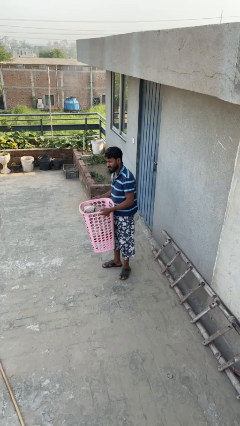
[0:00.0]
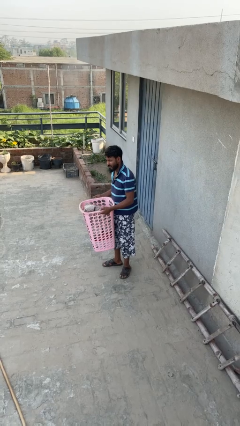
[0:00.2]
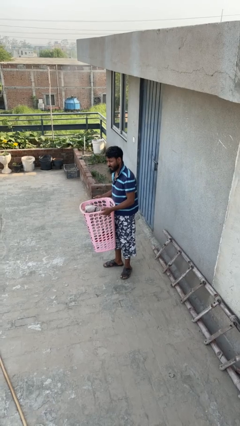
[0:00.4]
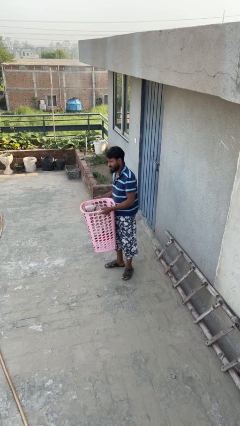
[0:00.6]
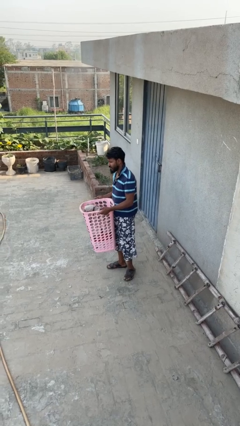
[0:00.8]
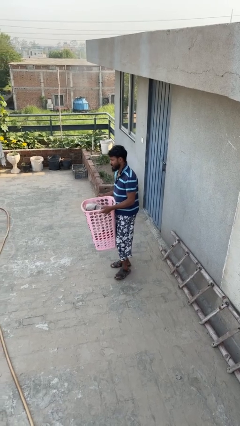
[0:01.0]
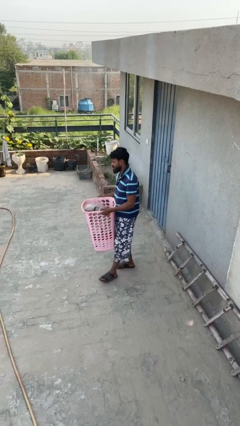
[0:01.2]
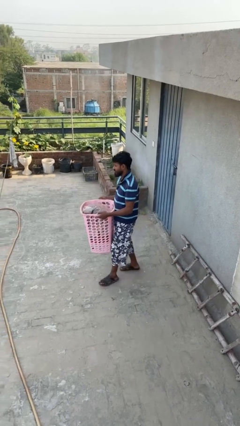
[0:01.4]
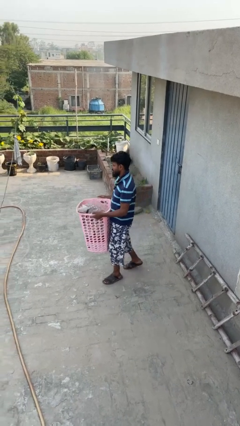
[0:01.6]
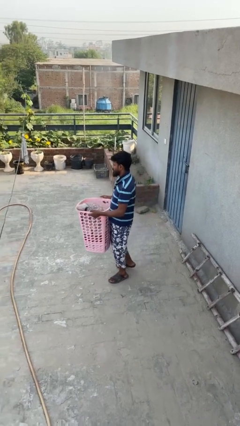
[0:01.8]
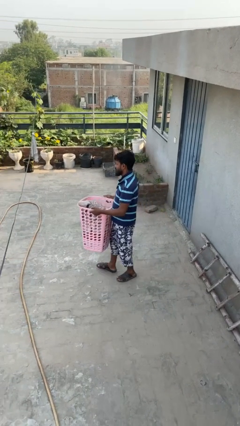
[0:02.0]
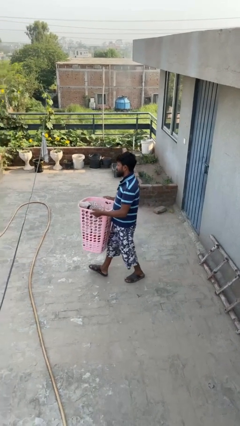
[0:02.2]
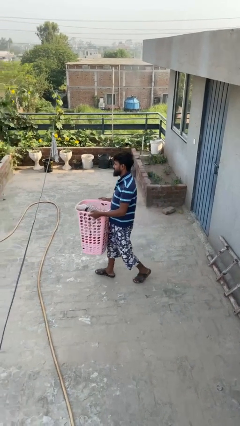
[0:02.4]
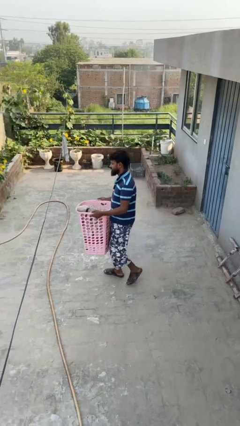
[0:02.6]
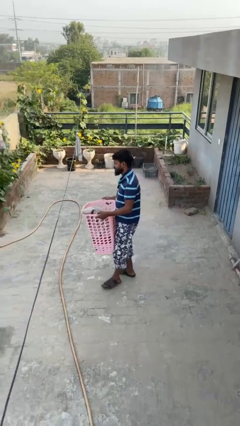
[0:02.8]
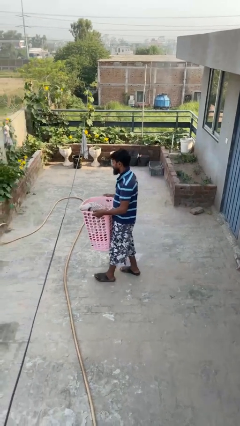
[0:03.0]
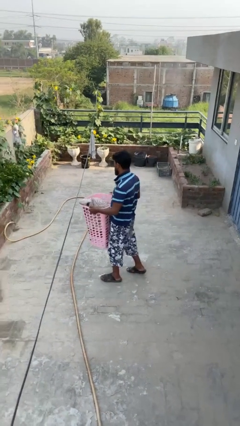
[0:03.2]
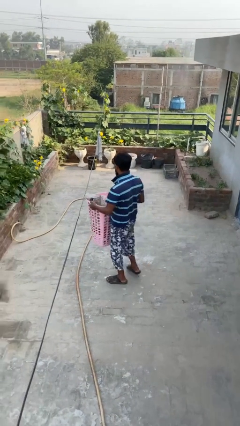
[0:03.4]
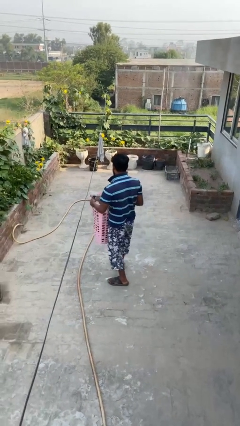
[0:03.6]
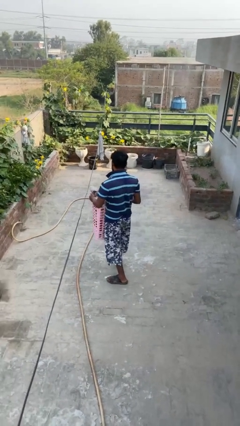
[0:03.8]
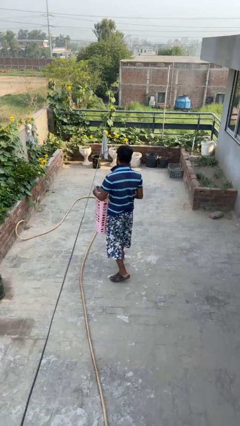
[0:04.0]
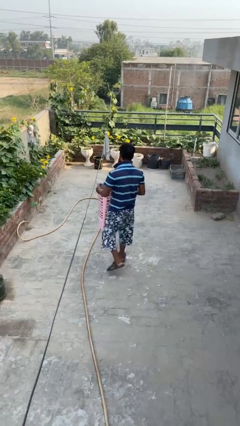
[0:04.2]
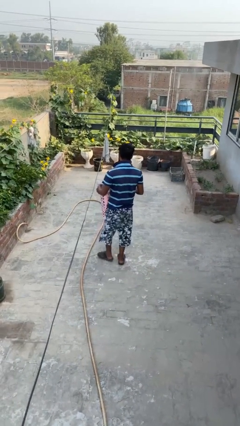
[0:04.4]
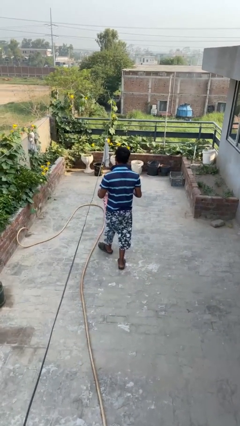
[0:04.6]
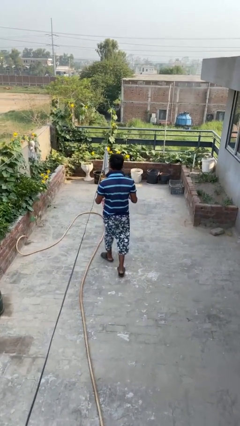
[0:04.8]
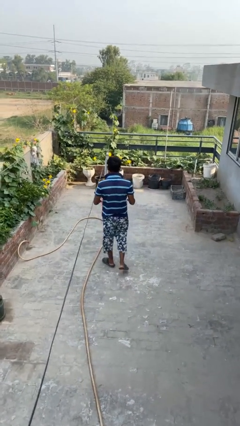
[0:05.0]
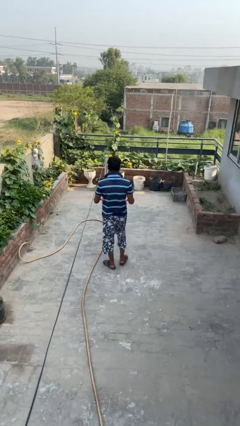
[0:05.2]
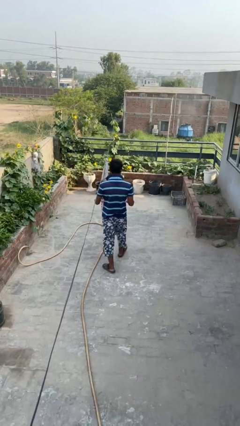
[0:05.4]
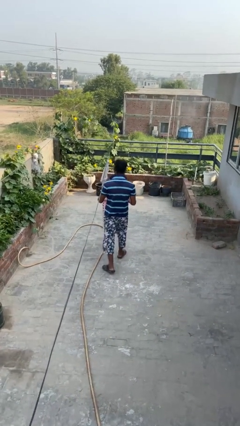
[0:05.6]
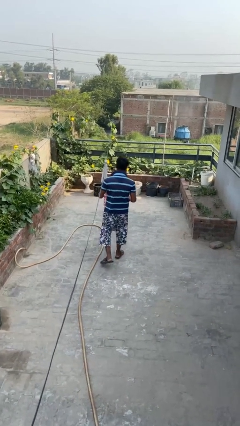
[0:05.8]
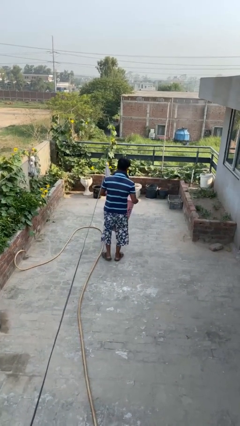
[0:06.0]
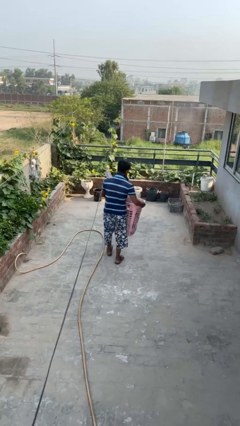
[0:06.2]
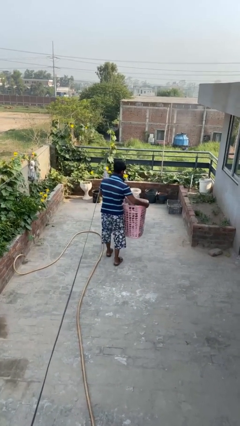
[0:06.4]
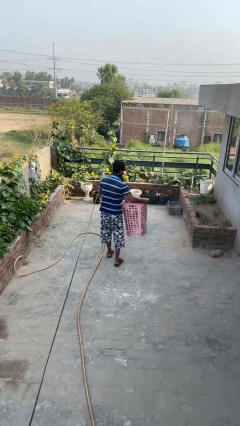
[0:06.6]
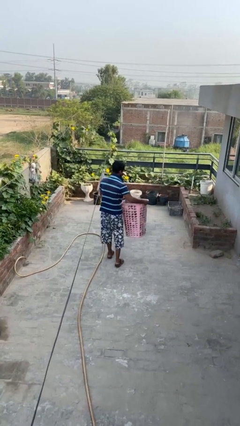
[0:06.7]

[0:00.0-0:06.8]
person carries laundry basket

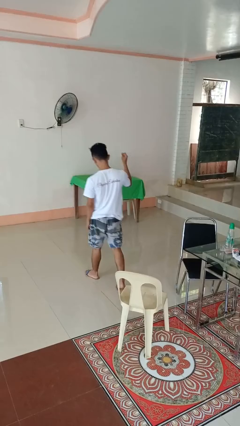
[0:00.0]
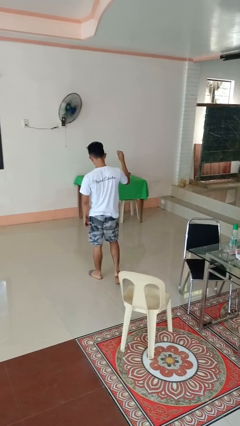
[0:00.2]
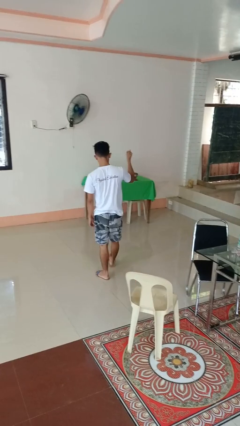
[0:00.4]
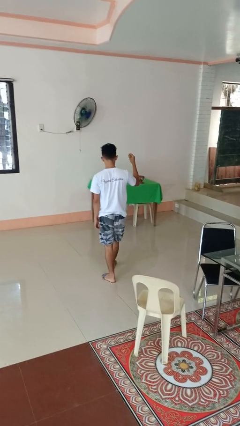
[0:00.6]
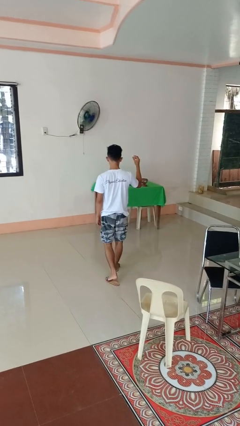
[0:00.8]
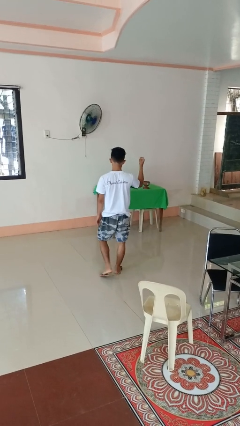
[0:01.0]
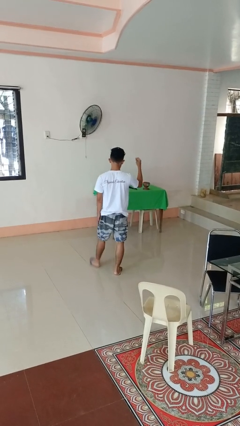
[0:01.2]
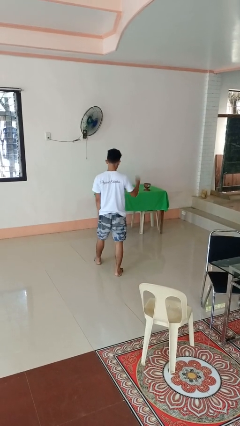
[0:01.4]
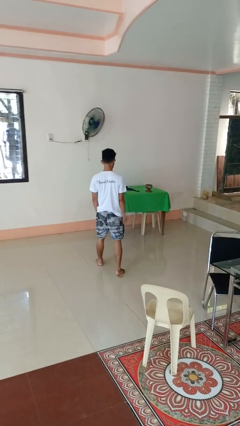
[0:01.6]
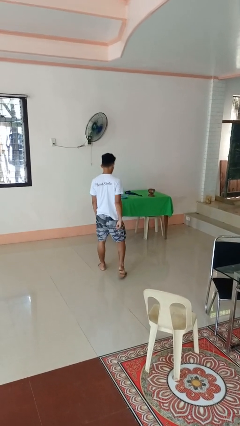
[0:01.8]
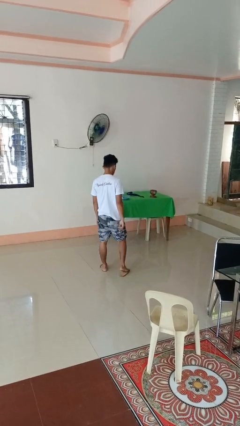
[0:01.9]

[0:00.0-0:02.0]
person snaps fingers

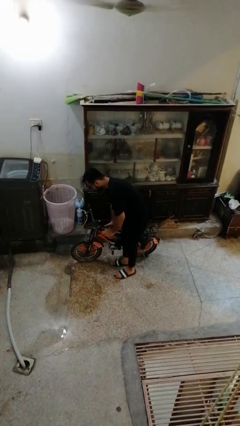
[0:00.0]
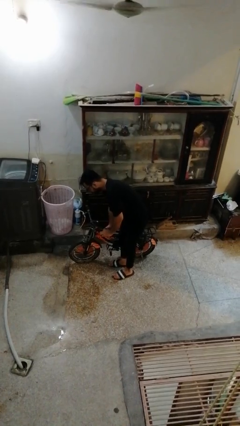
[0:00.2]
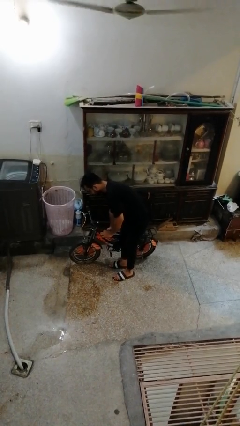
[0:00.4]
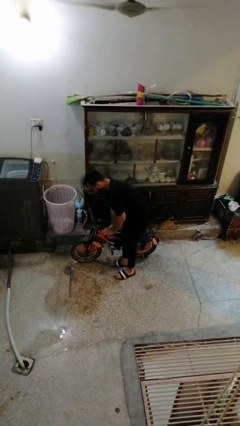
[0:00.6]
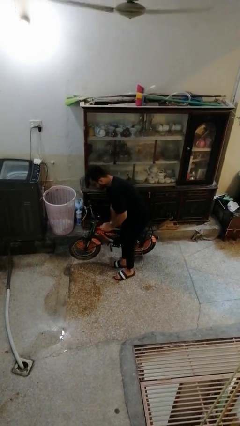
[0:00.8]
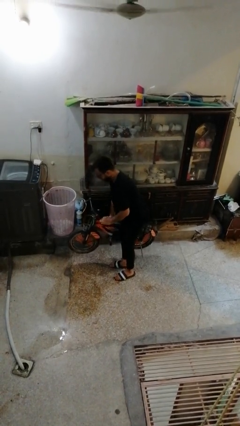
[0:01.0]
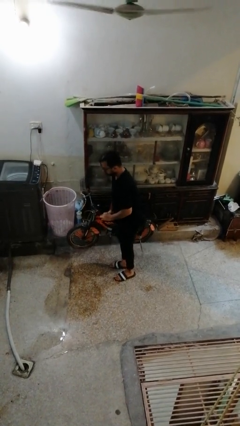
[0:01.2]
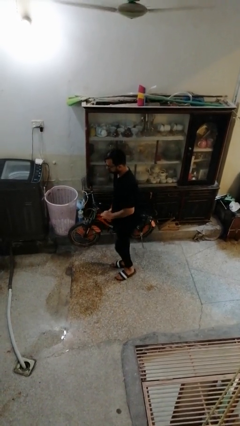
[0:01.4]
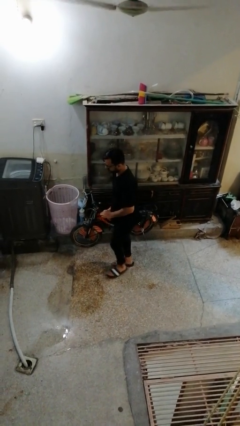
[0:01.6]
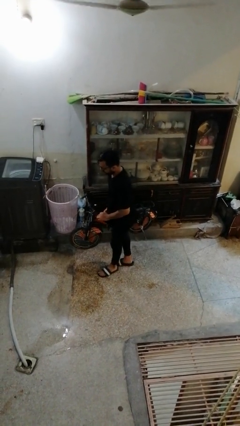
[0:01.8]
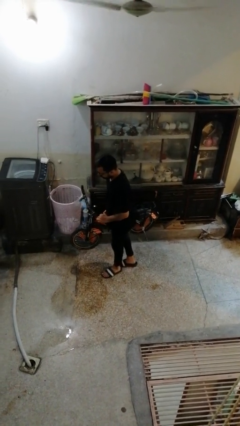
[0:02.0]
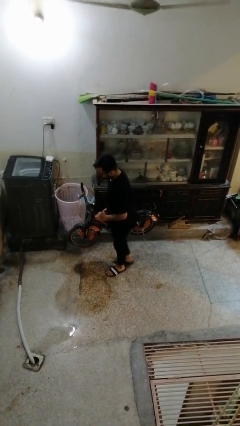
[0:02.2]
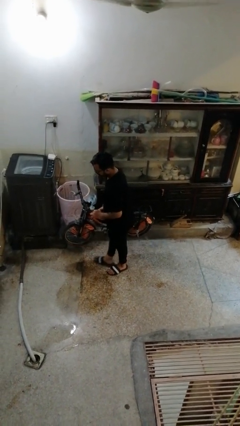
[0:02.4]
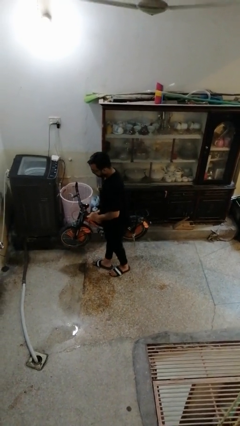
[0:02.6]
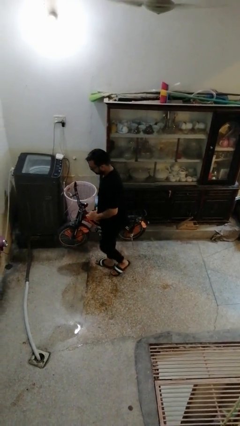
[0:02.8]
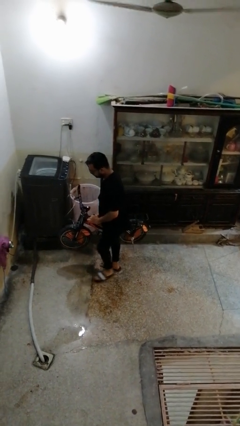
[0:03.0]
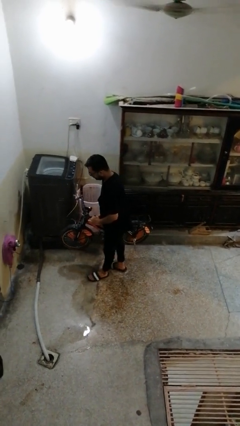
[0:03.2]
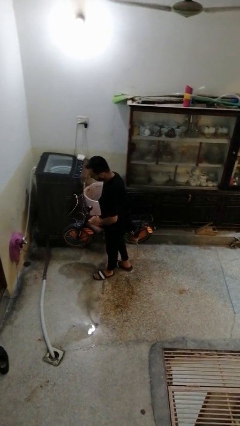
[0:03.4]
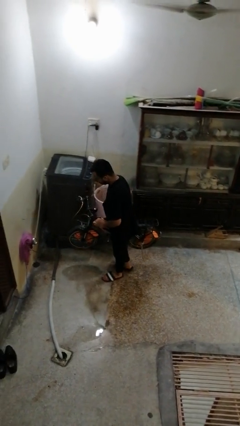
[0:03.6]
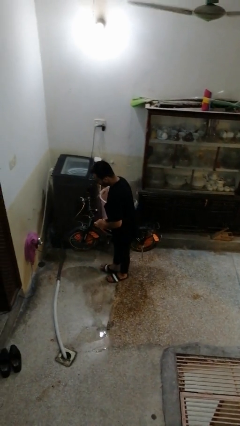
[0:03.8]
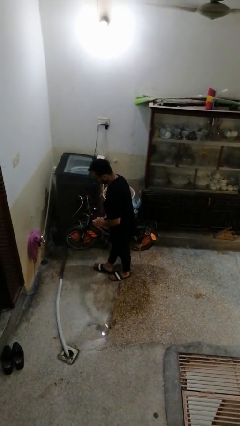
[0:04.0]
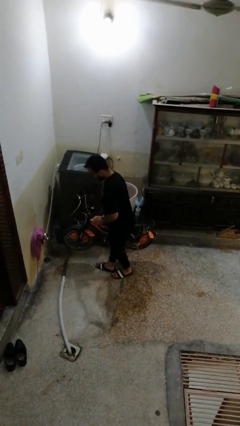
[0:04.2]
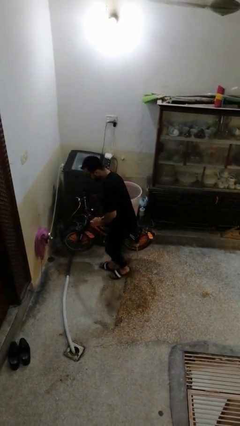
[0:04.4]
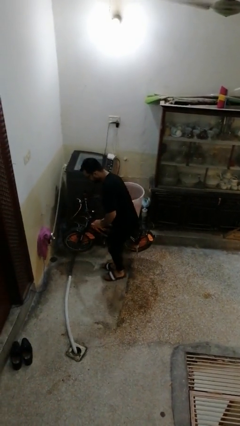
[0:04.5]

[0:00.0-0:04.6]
person carries bicycle

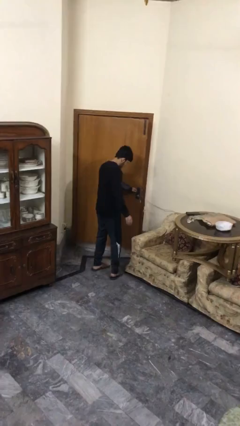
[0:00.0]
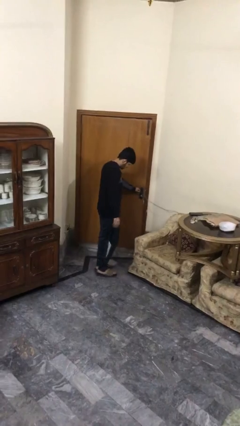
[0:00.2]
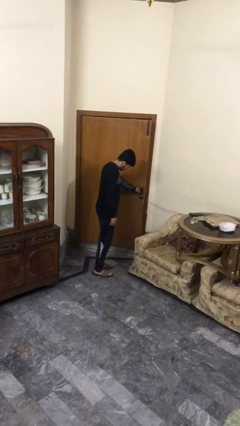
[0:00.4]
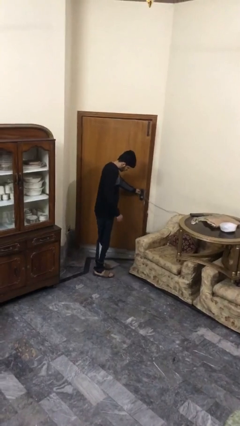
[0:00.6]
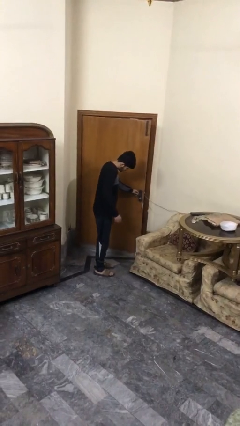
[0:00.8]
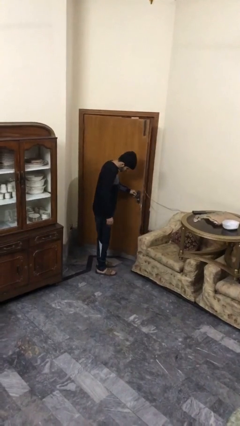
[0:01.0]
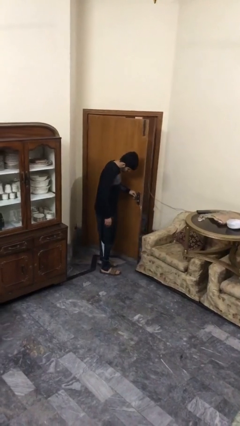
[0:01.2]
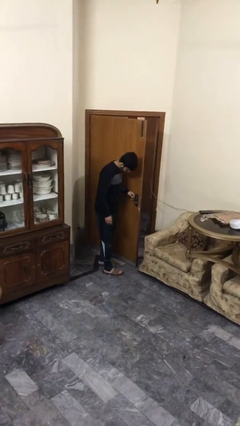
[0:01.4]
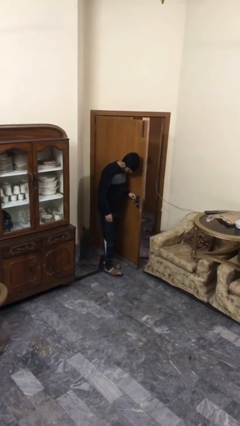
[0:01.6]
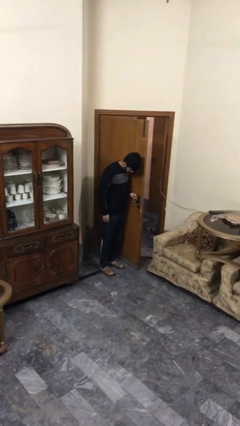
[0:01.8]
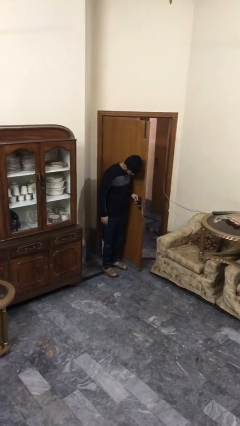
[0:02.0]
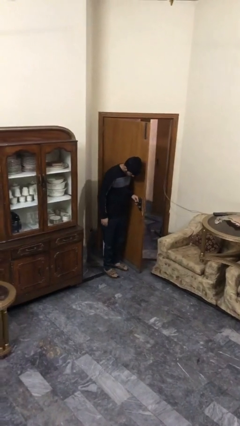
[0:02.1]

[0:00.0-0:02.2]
person opens facility door

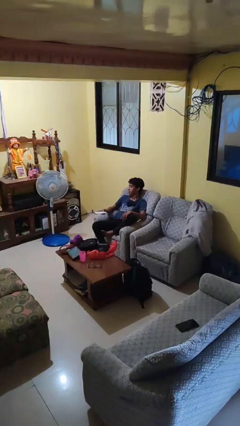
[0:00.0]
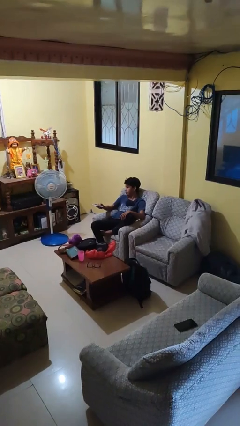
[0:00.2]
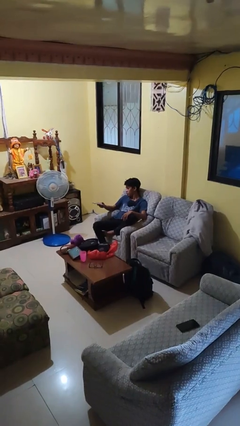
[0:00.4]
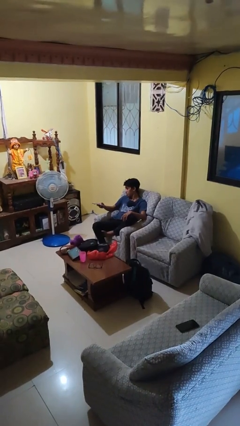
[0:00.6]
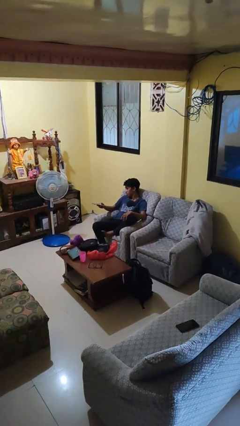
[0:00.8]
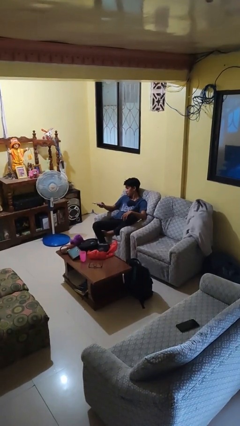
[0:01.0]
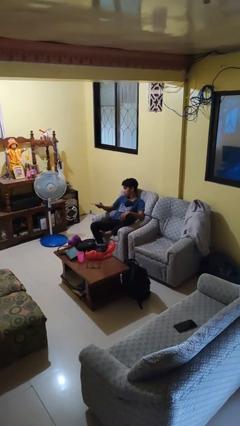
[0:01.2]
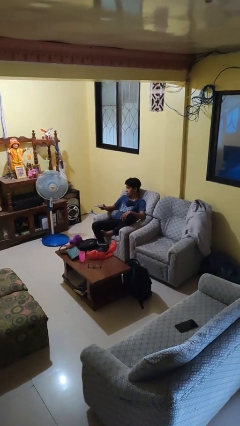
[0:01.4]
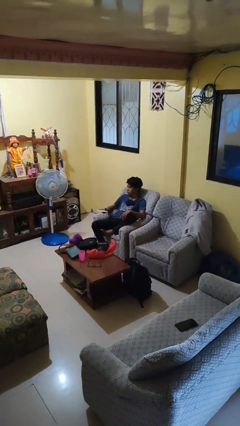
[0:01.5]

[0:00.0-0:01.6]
person uses television remote

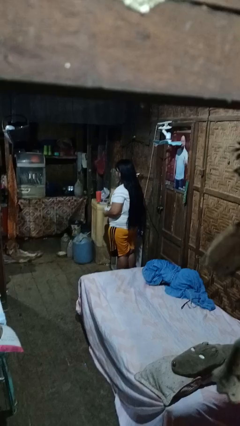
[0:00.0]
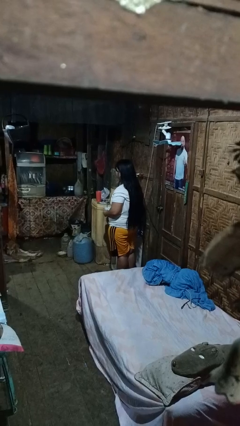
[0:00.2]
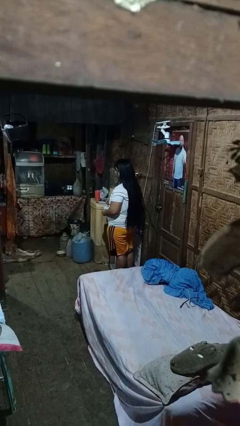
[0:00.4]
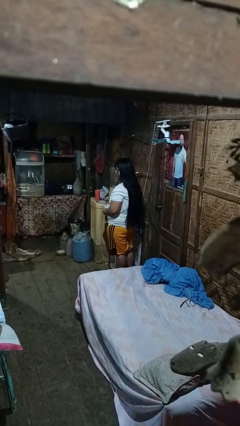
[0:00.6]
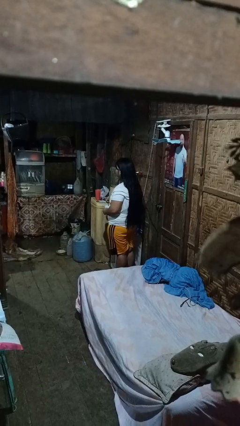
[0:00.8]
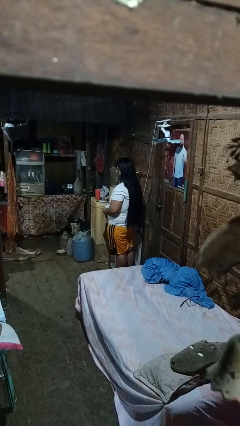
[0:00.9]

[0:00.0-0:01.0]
person stirs mug
